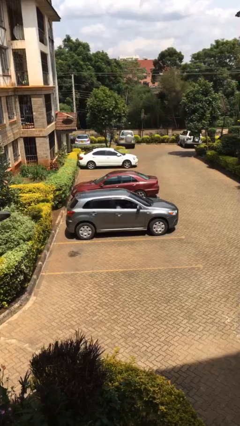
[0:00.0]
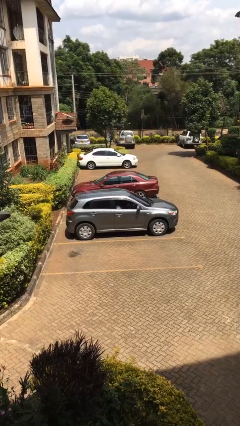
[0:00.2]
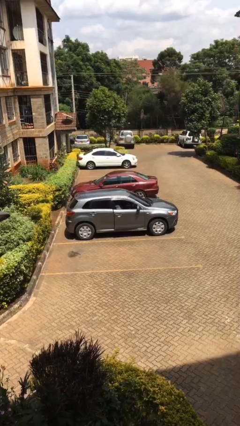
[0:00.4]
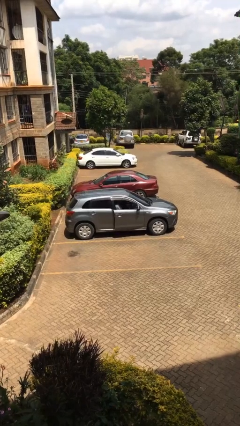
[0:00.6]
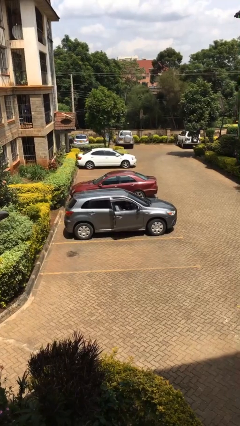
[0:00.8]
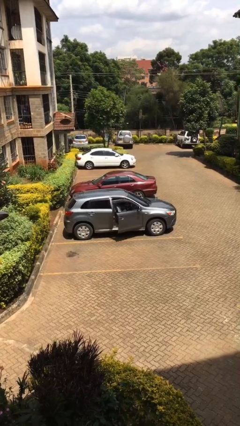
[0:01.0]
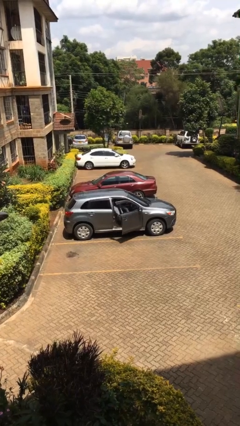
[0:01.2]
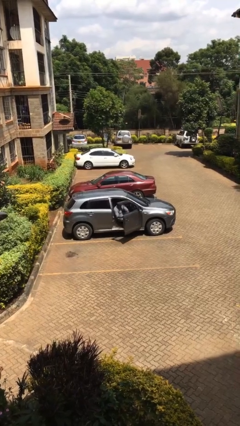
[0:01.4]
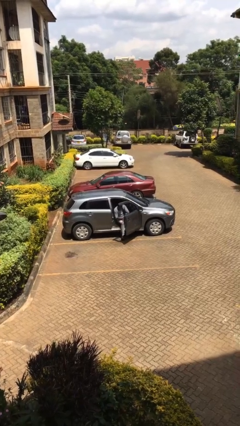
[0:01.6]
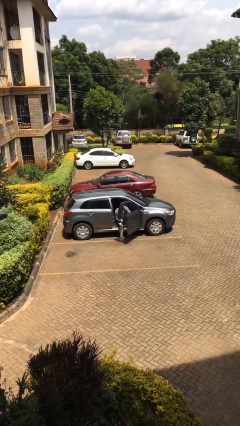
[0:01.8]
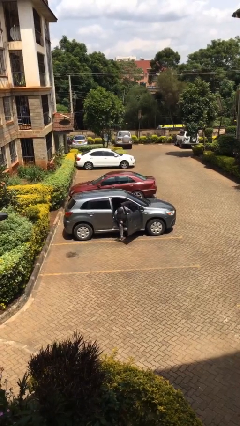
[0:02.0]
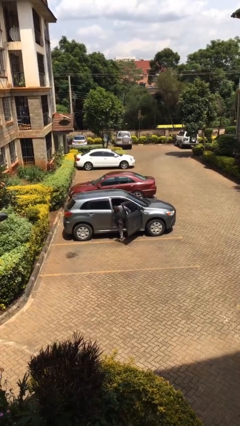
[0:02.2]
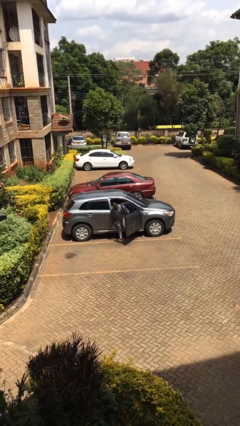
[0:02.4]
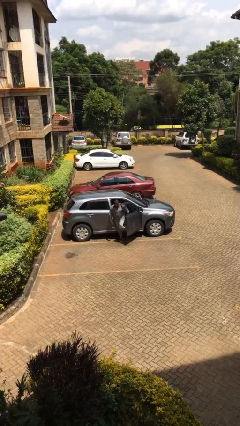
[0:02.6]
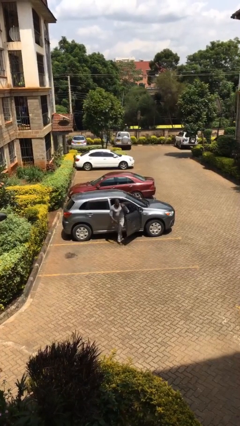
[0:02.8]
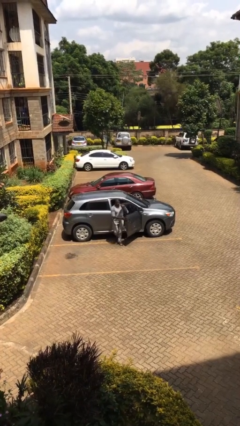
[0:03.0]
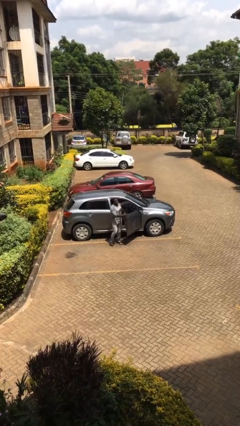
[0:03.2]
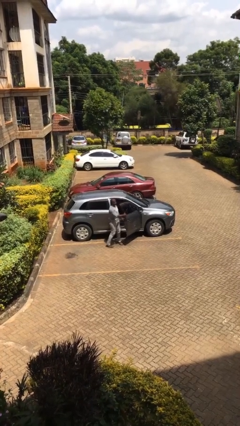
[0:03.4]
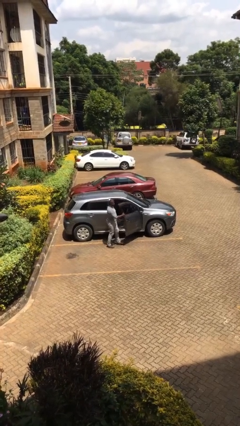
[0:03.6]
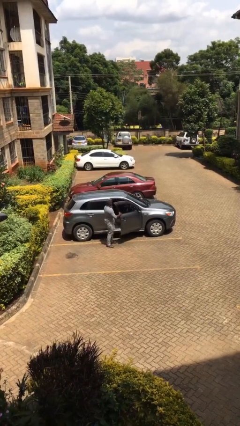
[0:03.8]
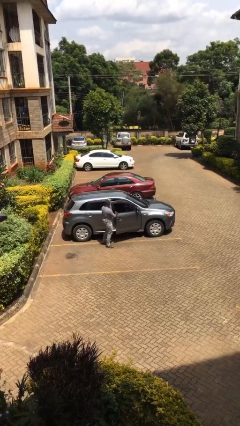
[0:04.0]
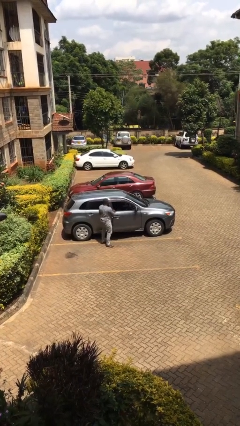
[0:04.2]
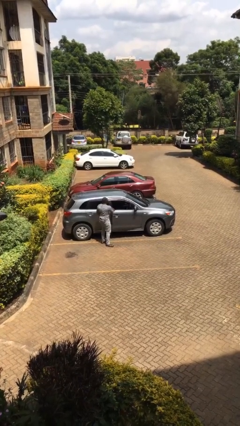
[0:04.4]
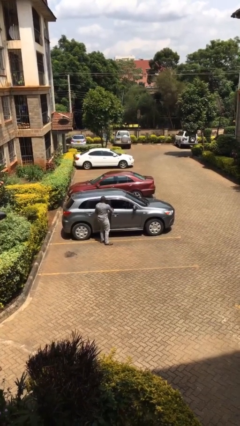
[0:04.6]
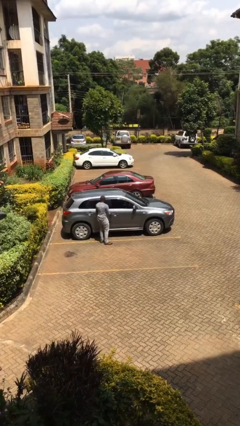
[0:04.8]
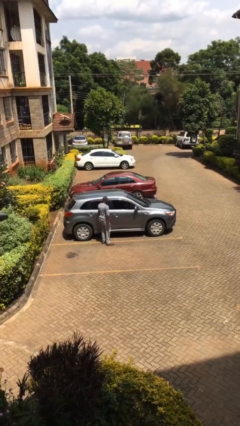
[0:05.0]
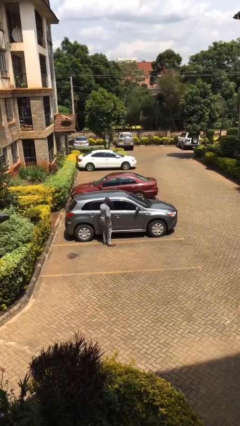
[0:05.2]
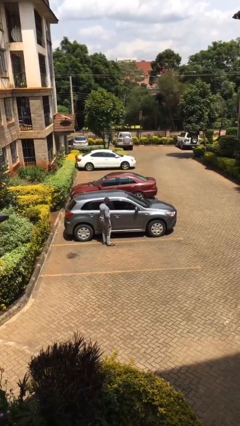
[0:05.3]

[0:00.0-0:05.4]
car drops off person

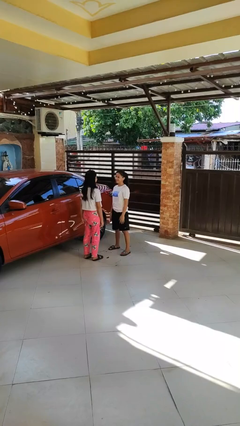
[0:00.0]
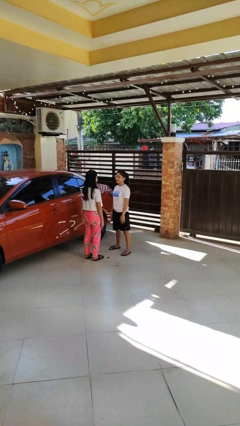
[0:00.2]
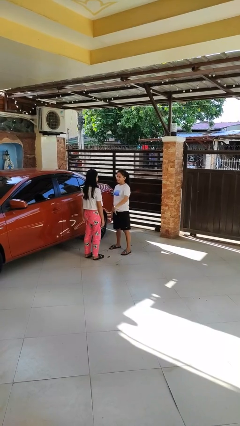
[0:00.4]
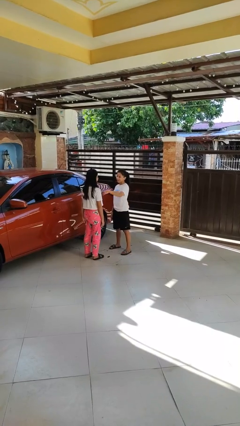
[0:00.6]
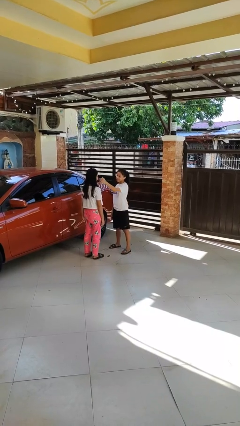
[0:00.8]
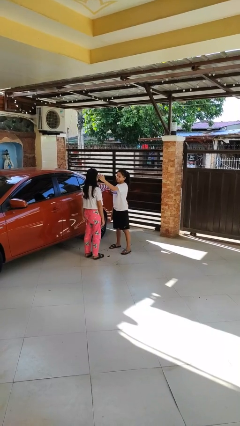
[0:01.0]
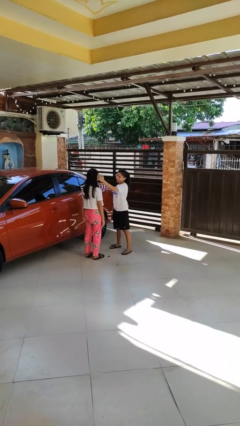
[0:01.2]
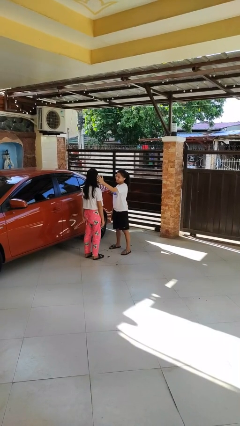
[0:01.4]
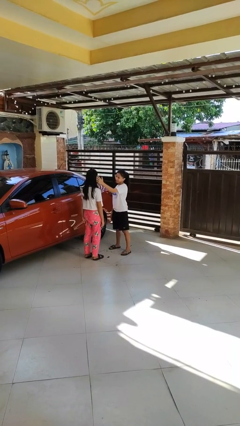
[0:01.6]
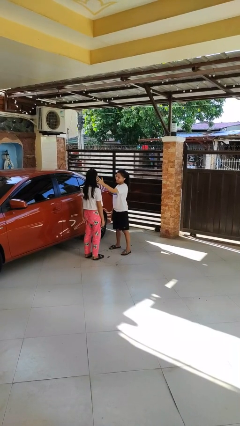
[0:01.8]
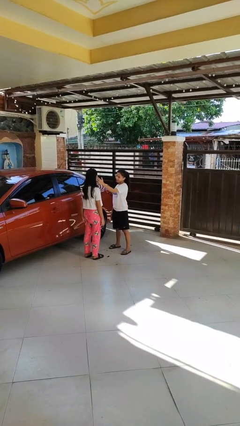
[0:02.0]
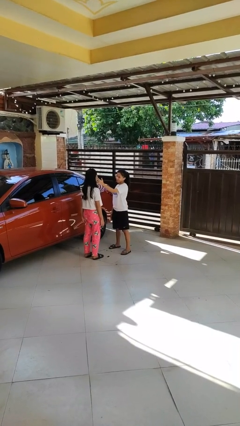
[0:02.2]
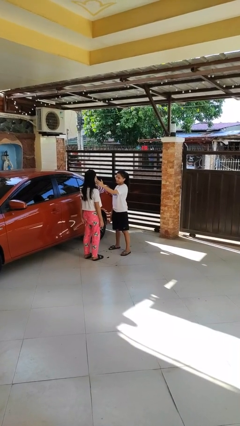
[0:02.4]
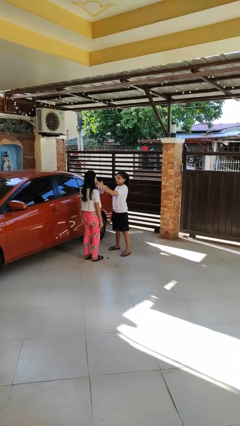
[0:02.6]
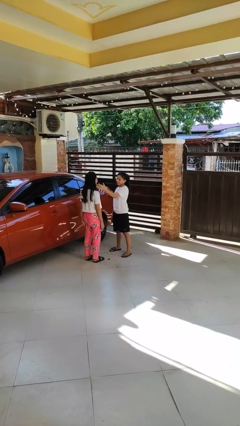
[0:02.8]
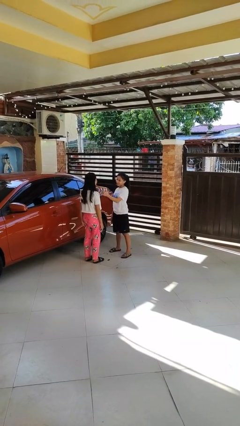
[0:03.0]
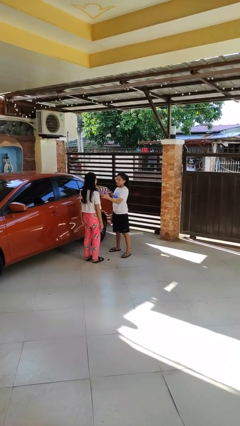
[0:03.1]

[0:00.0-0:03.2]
person touches face of person

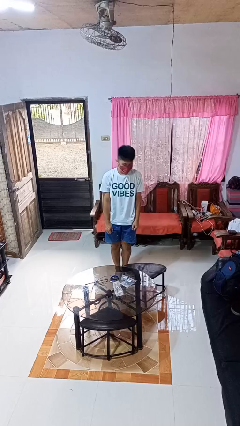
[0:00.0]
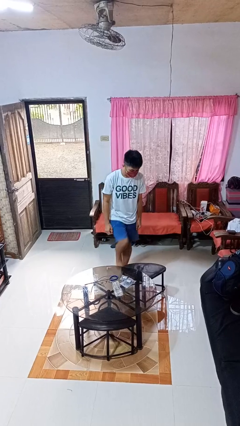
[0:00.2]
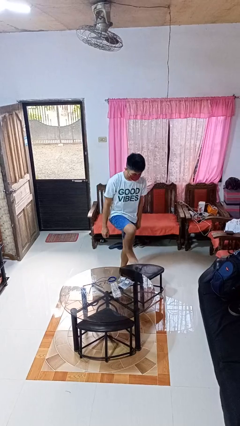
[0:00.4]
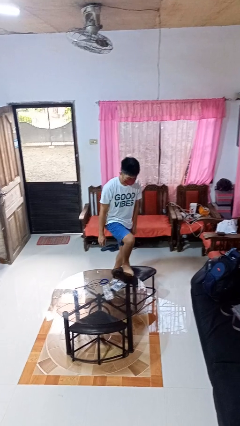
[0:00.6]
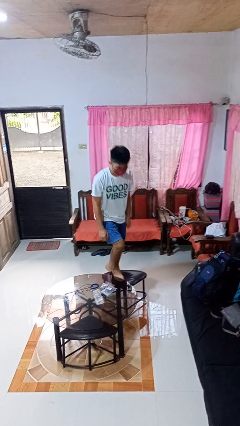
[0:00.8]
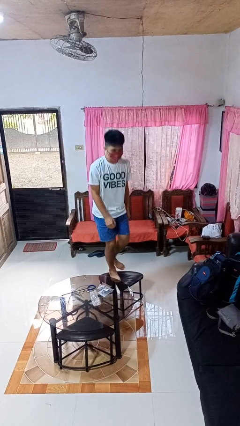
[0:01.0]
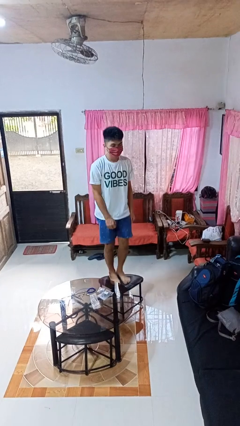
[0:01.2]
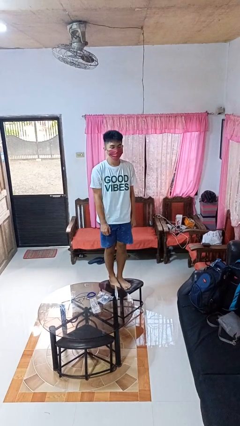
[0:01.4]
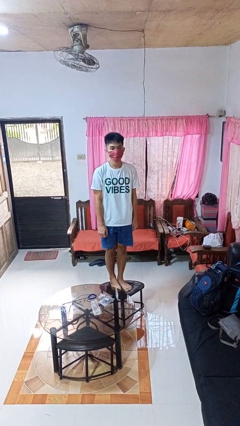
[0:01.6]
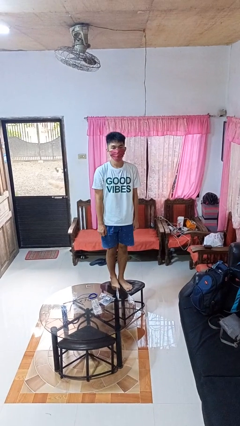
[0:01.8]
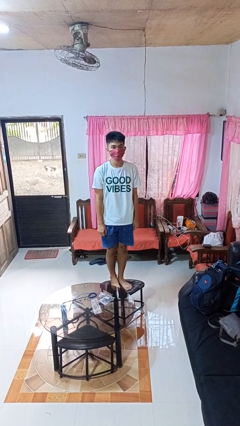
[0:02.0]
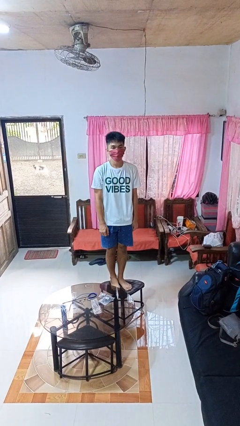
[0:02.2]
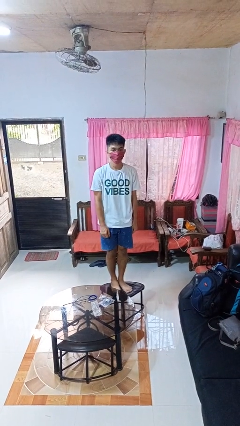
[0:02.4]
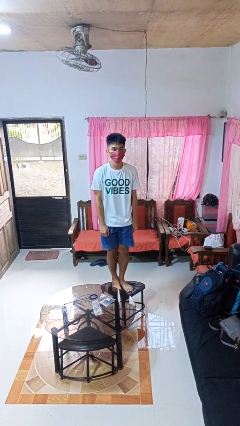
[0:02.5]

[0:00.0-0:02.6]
person climbs on chair

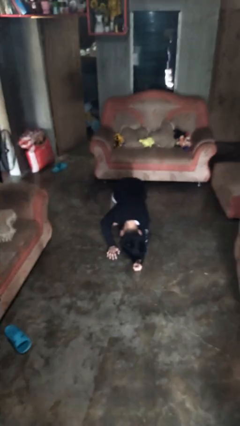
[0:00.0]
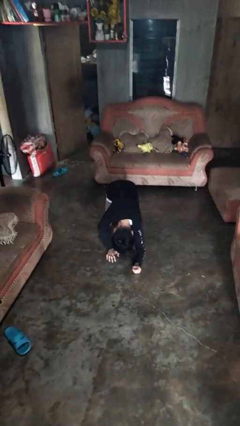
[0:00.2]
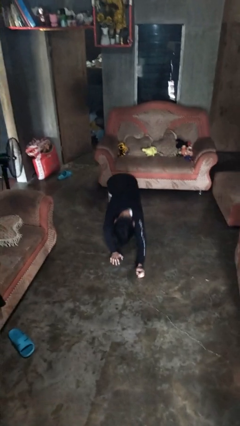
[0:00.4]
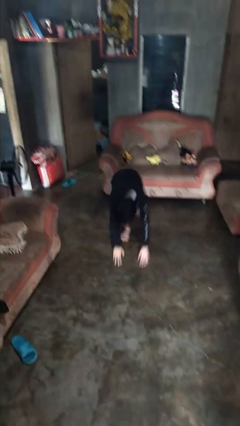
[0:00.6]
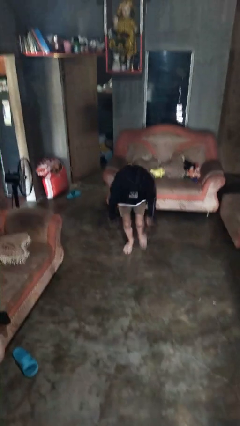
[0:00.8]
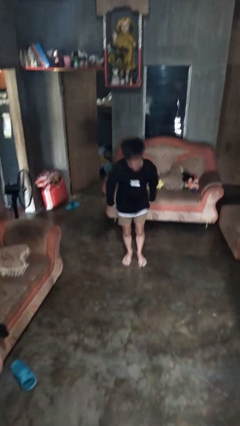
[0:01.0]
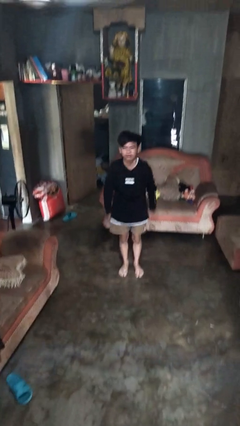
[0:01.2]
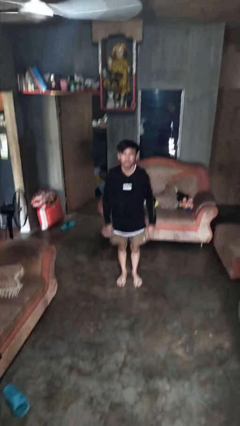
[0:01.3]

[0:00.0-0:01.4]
person stands up from floor

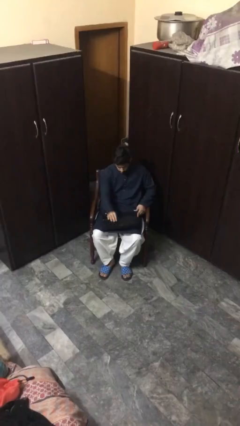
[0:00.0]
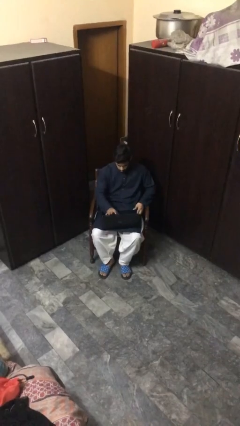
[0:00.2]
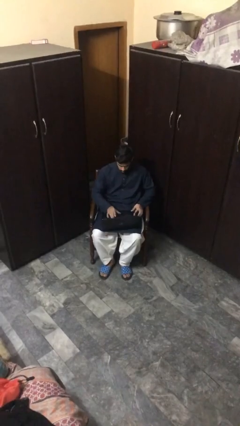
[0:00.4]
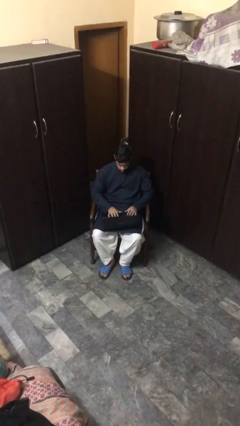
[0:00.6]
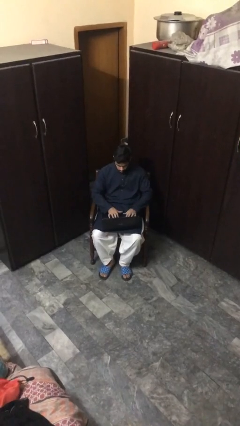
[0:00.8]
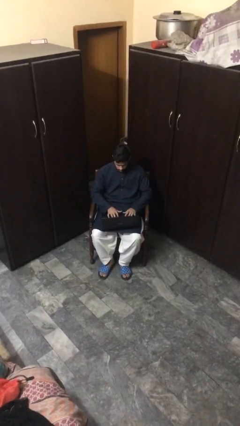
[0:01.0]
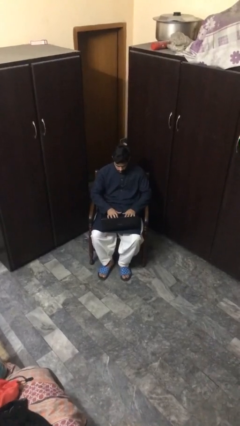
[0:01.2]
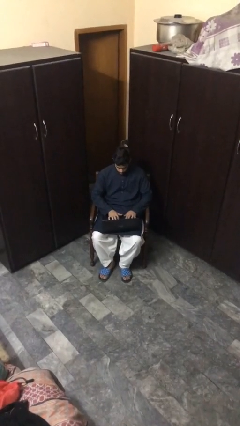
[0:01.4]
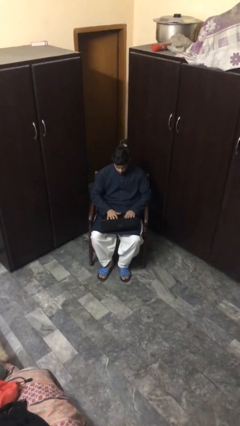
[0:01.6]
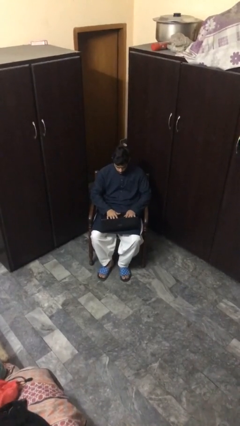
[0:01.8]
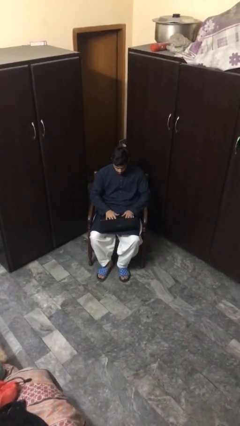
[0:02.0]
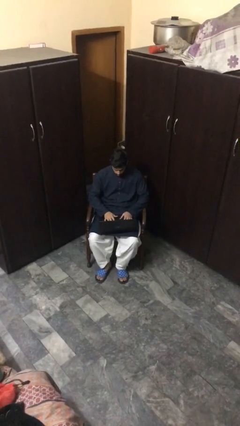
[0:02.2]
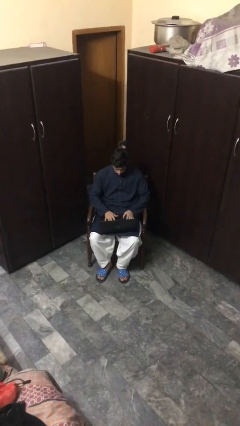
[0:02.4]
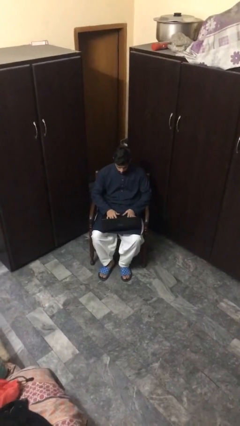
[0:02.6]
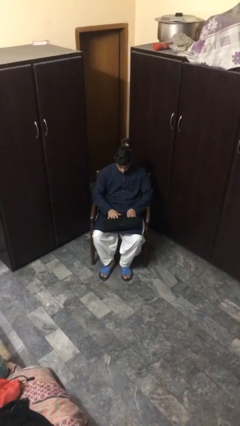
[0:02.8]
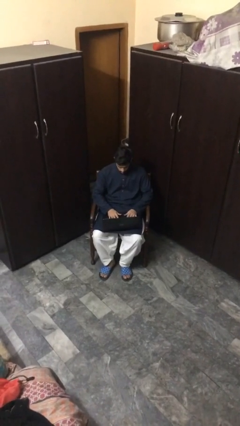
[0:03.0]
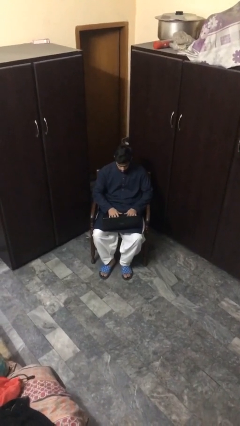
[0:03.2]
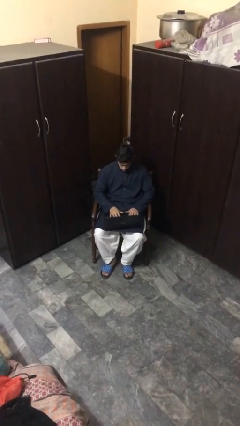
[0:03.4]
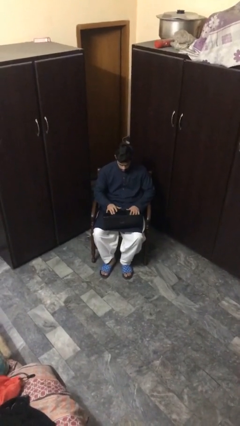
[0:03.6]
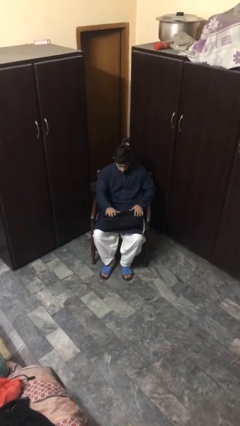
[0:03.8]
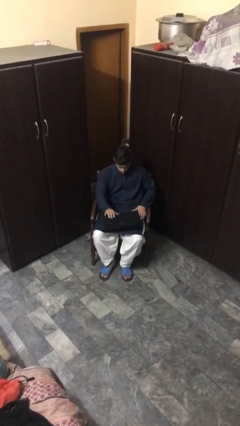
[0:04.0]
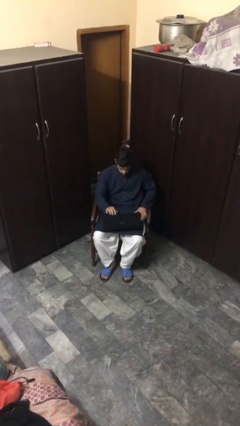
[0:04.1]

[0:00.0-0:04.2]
person interacts with laptop

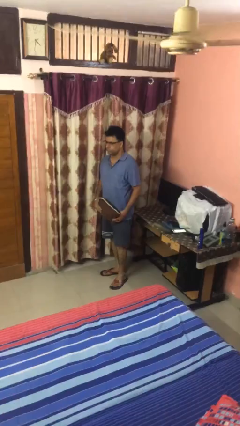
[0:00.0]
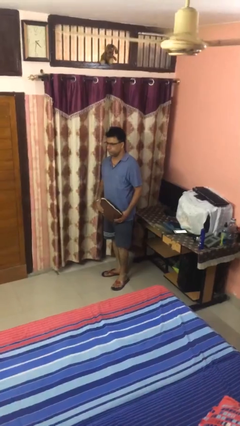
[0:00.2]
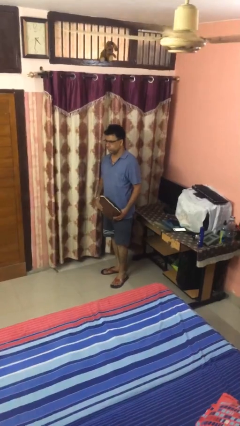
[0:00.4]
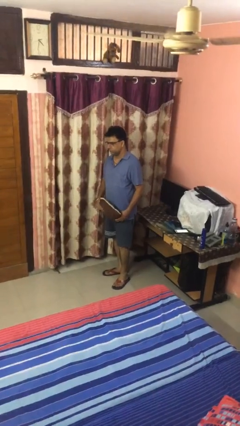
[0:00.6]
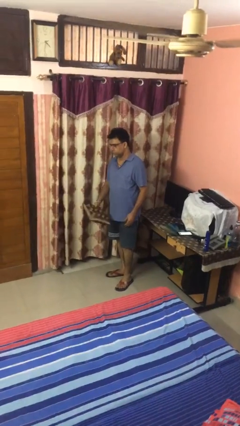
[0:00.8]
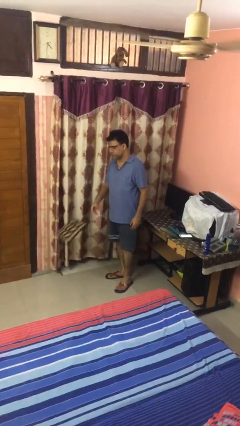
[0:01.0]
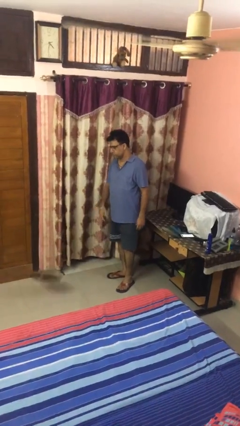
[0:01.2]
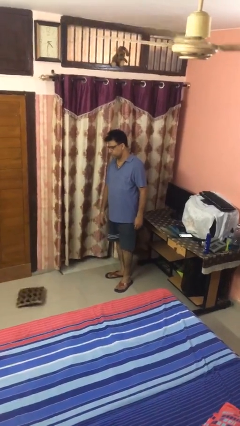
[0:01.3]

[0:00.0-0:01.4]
person throws object to ground
